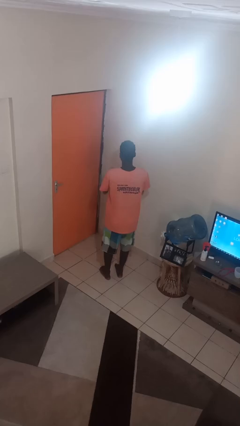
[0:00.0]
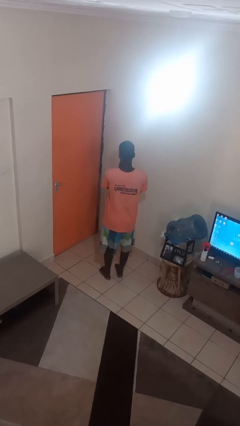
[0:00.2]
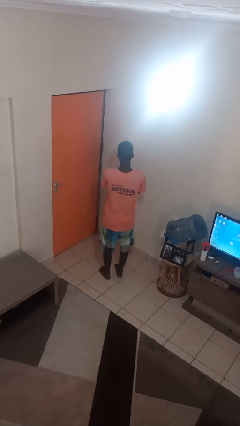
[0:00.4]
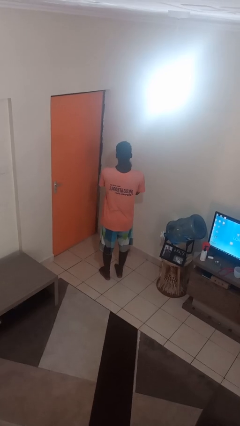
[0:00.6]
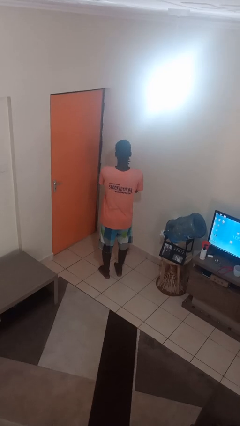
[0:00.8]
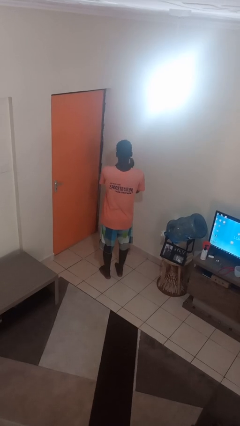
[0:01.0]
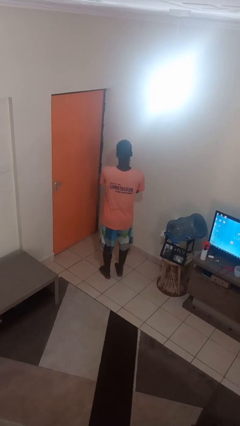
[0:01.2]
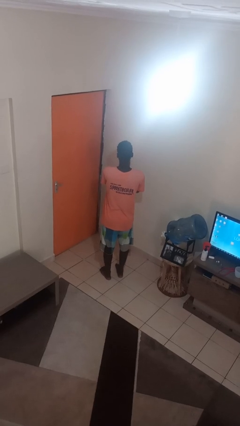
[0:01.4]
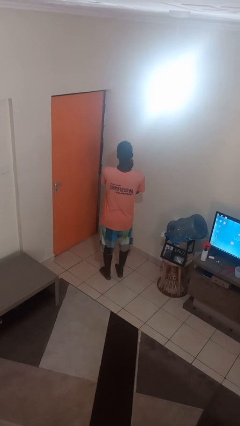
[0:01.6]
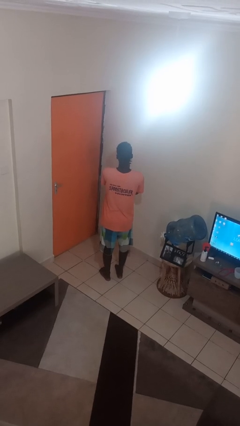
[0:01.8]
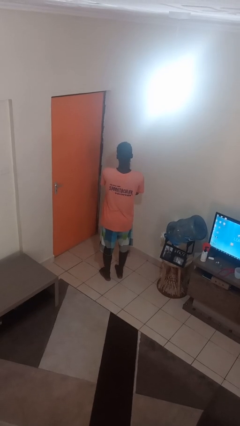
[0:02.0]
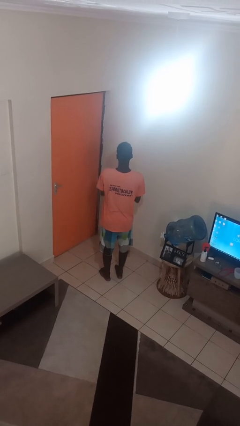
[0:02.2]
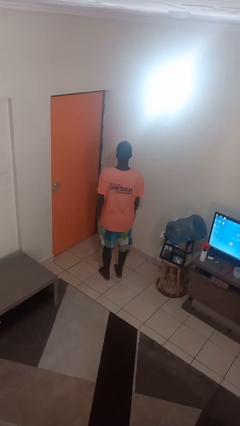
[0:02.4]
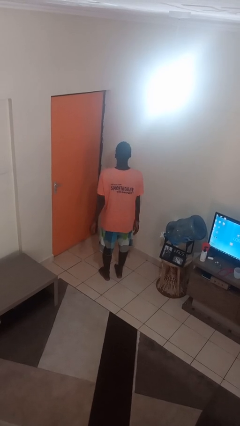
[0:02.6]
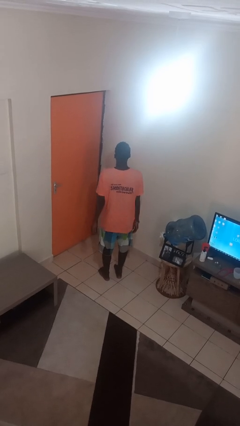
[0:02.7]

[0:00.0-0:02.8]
person claps hands

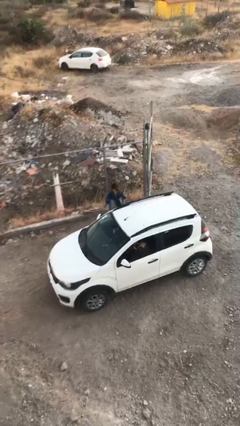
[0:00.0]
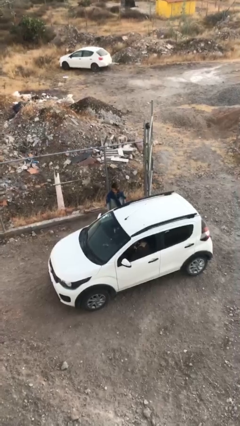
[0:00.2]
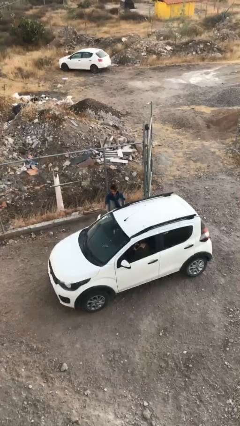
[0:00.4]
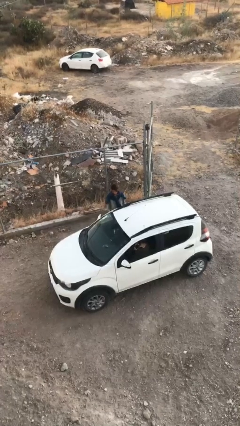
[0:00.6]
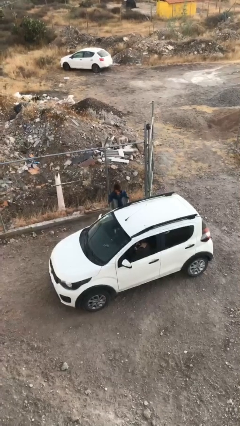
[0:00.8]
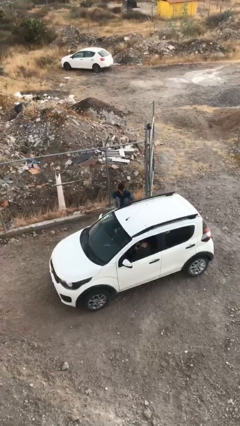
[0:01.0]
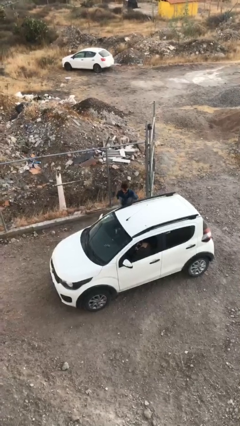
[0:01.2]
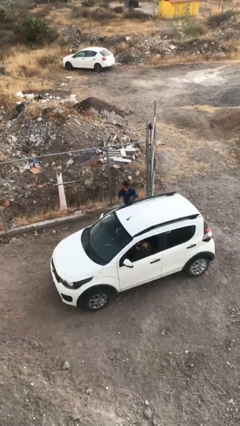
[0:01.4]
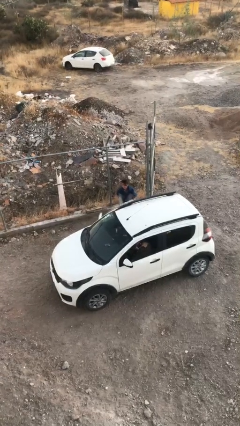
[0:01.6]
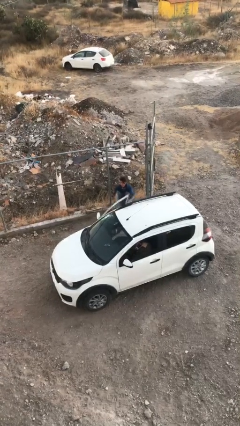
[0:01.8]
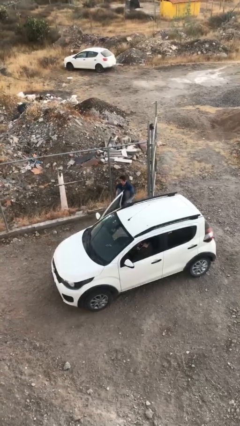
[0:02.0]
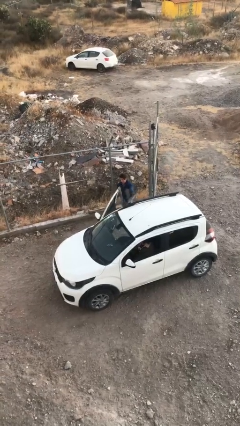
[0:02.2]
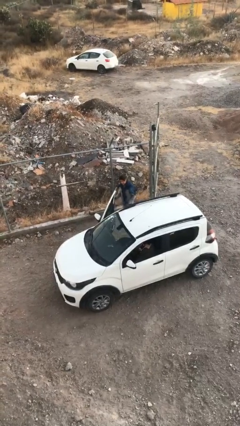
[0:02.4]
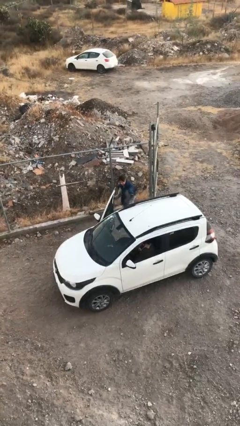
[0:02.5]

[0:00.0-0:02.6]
person opens car door

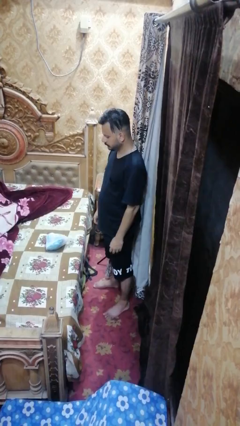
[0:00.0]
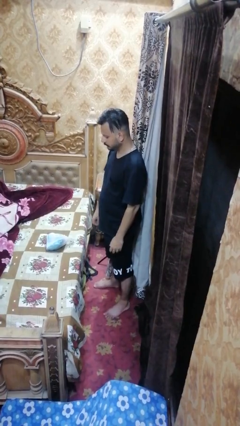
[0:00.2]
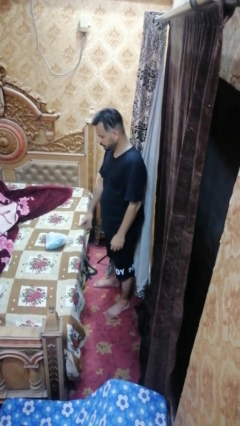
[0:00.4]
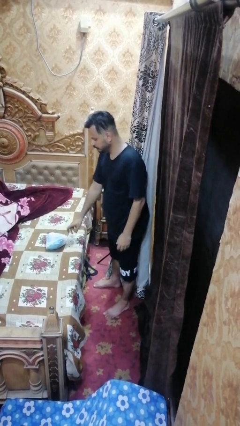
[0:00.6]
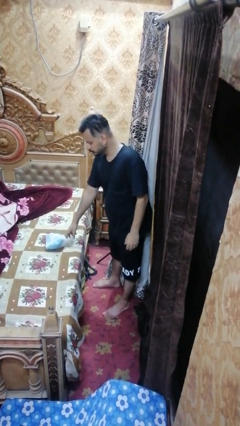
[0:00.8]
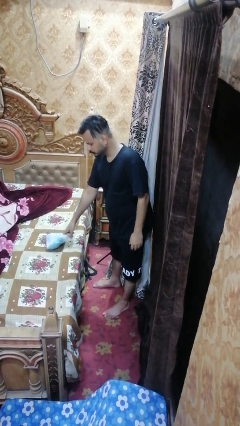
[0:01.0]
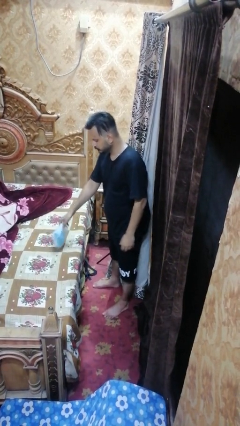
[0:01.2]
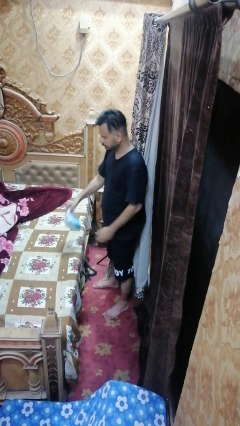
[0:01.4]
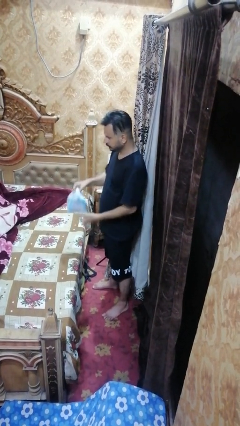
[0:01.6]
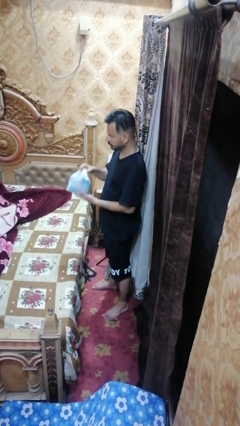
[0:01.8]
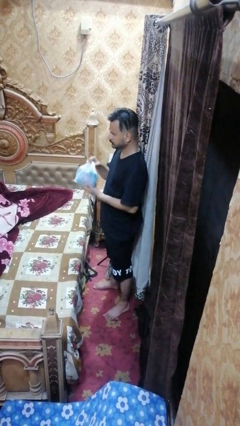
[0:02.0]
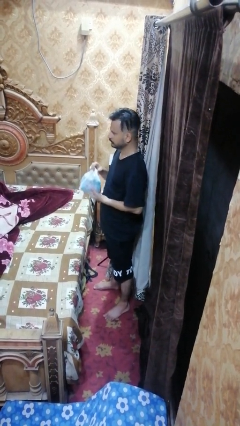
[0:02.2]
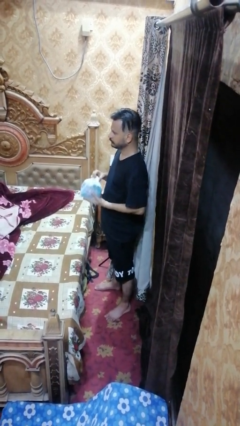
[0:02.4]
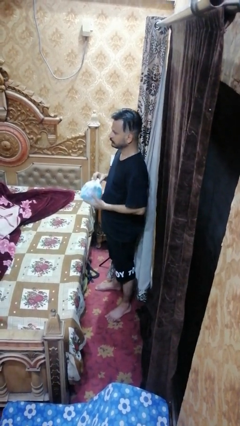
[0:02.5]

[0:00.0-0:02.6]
person picks up object from bed

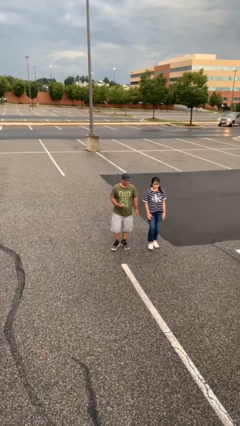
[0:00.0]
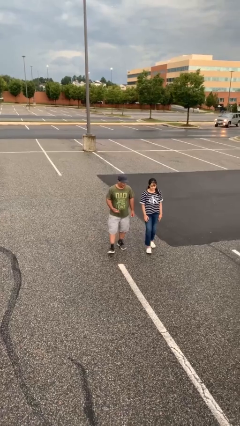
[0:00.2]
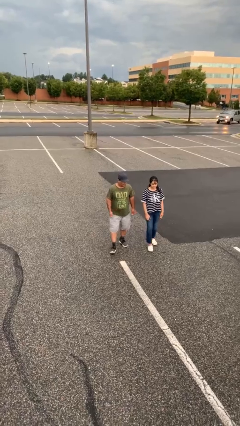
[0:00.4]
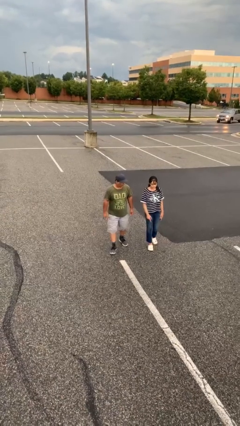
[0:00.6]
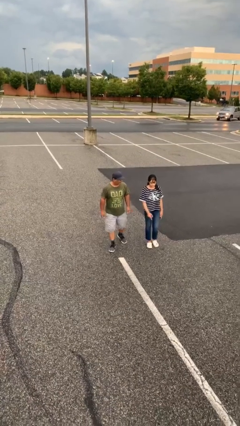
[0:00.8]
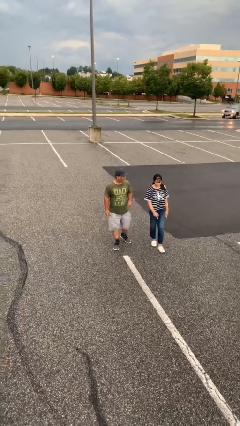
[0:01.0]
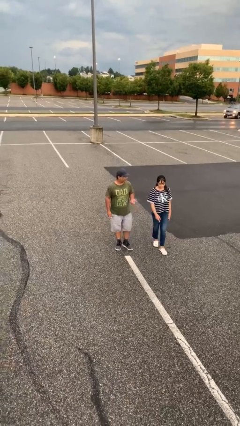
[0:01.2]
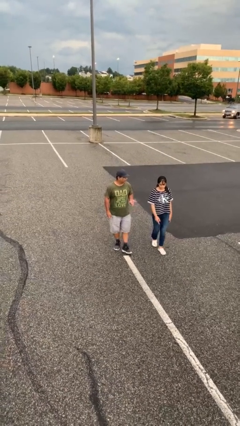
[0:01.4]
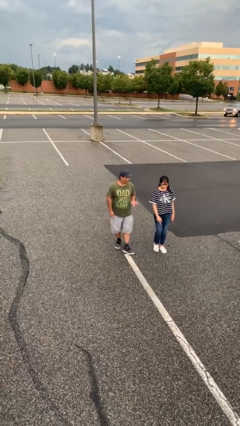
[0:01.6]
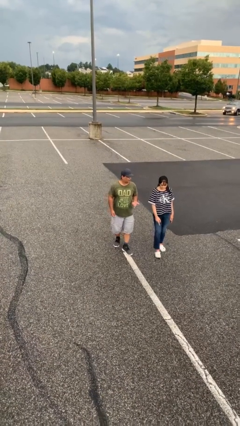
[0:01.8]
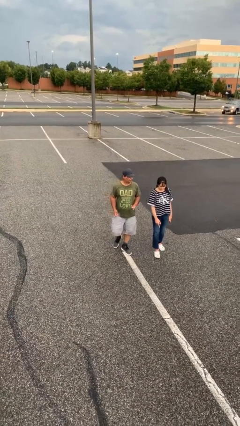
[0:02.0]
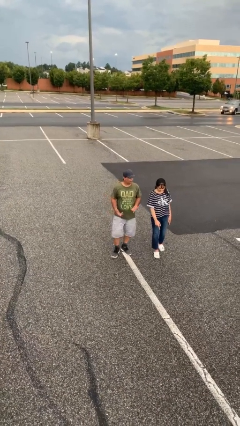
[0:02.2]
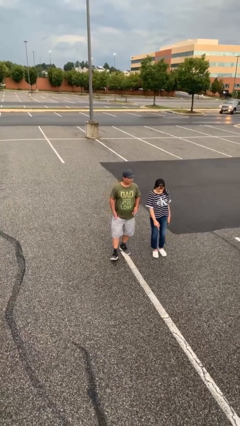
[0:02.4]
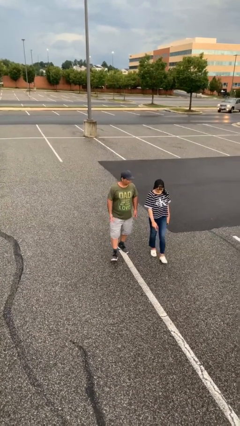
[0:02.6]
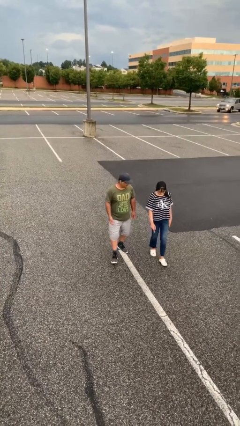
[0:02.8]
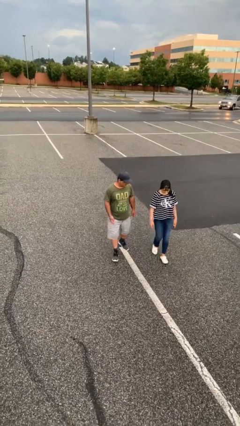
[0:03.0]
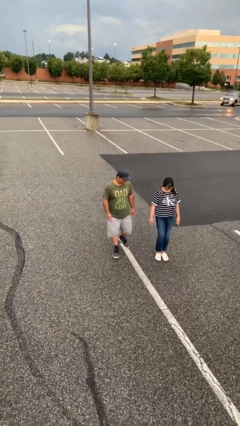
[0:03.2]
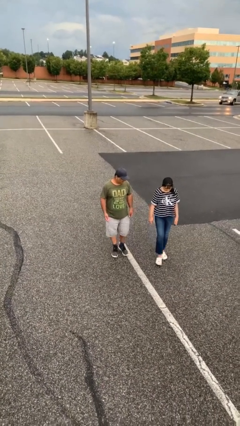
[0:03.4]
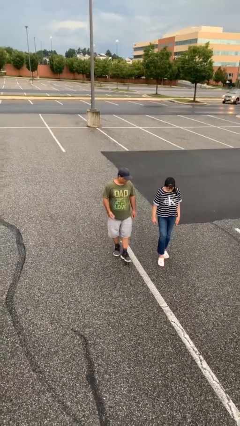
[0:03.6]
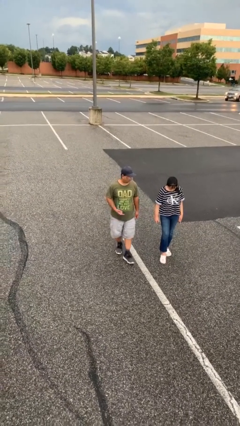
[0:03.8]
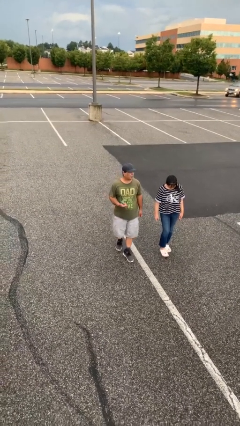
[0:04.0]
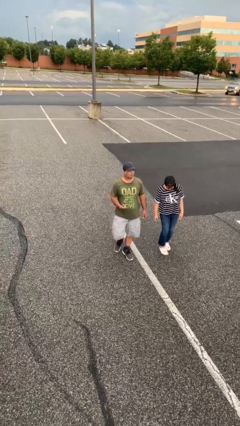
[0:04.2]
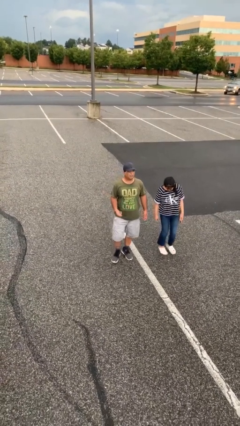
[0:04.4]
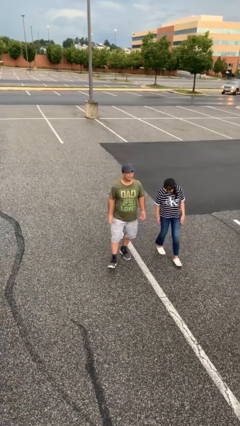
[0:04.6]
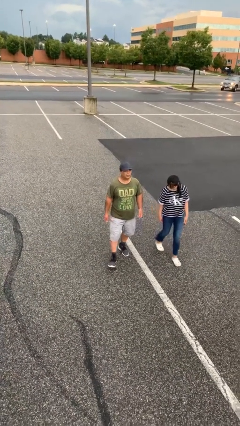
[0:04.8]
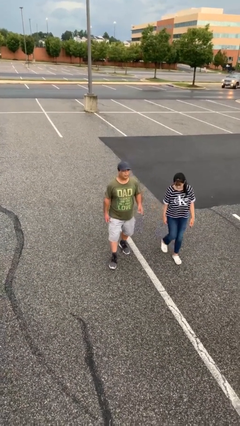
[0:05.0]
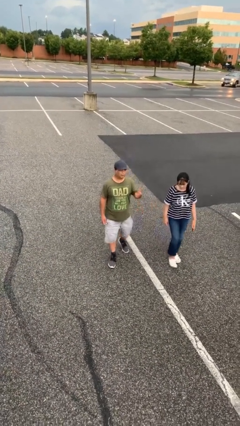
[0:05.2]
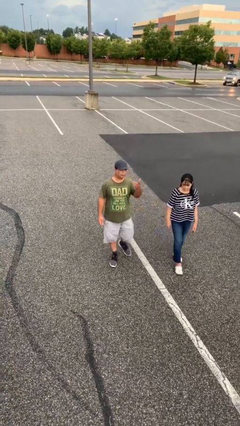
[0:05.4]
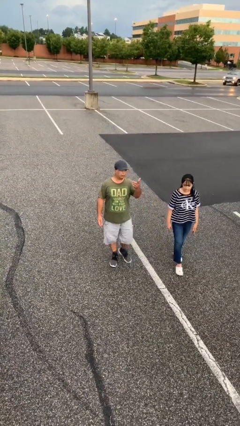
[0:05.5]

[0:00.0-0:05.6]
person talks to person

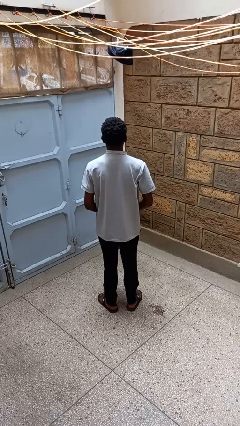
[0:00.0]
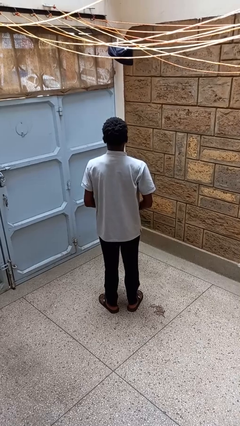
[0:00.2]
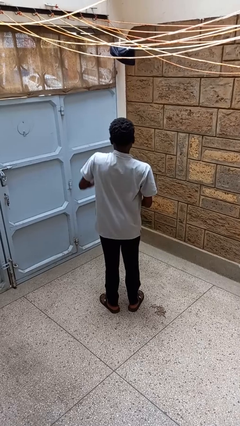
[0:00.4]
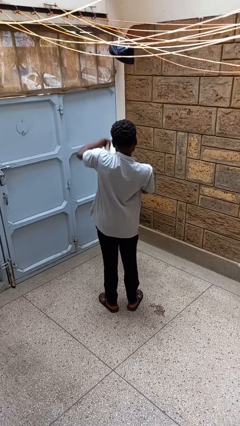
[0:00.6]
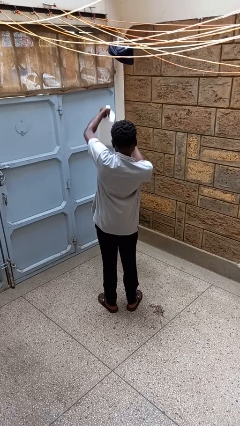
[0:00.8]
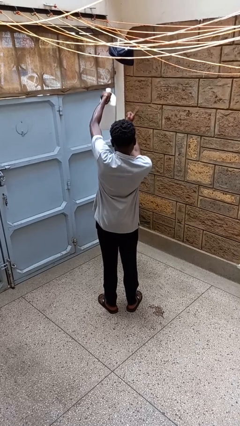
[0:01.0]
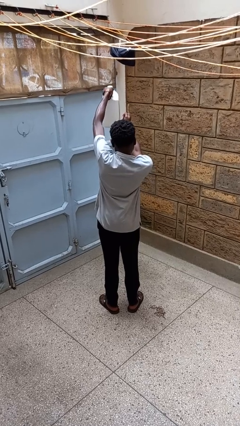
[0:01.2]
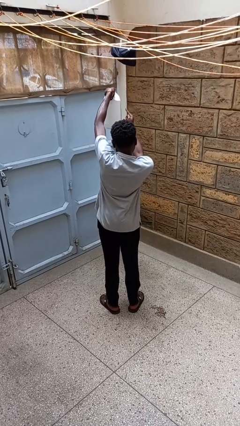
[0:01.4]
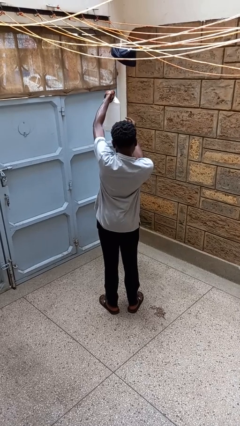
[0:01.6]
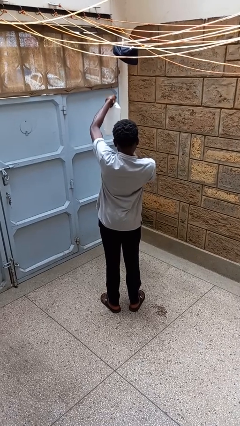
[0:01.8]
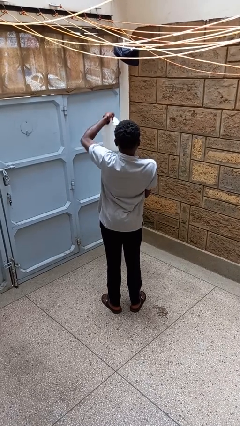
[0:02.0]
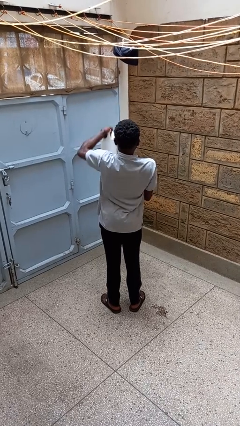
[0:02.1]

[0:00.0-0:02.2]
person taps object with finger

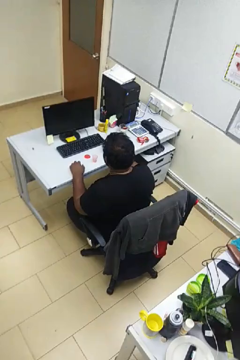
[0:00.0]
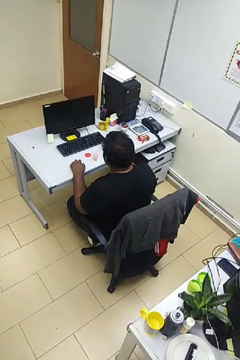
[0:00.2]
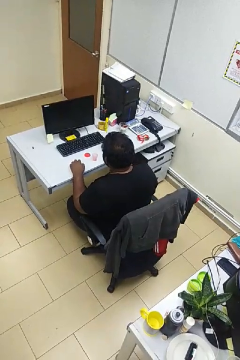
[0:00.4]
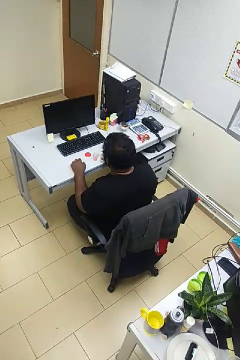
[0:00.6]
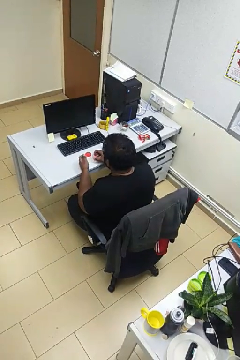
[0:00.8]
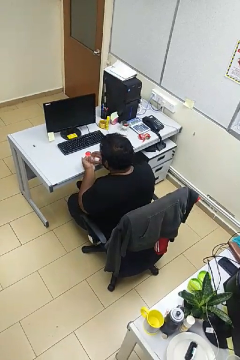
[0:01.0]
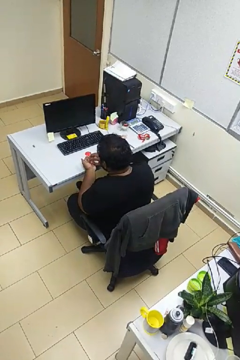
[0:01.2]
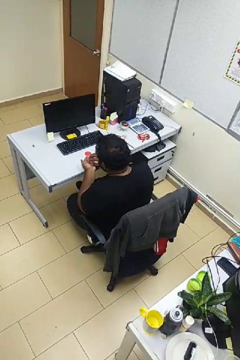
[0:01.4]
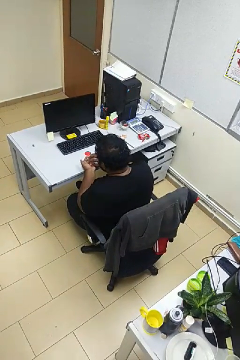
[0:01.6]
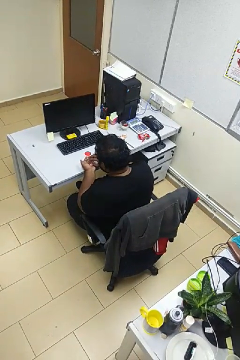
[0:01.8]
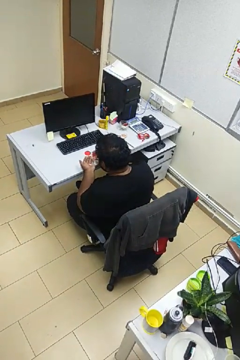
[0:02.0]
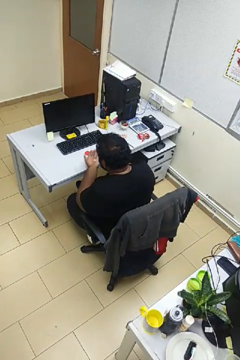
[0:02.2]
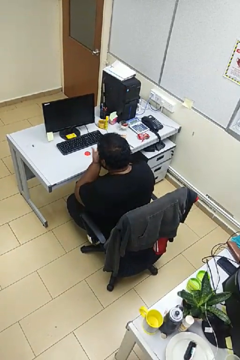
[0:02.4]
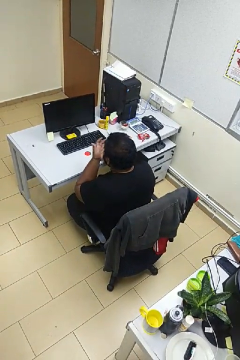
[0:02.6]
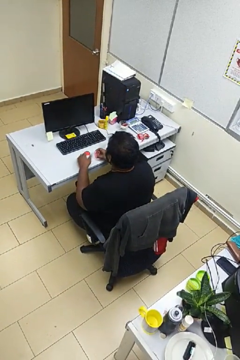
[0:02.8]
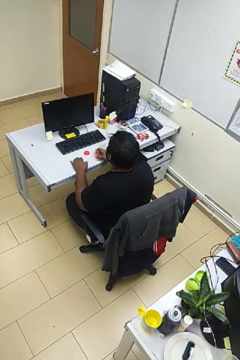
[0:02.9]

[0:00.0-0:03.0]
person takes medicine pills
